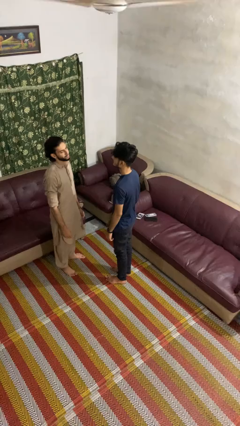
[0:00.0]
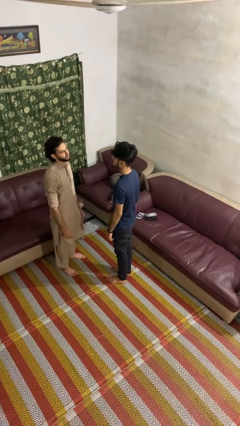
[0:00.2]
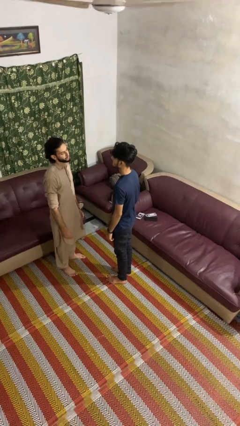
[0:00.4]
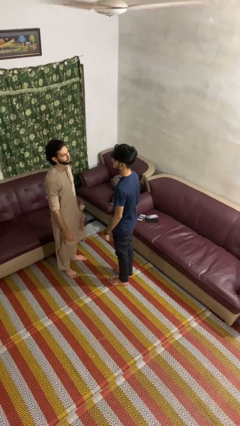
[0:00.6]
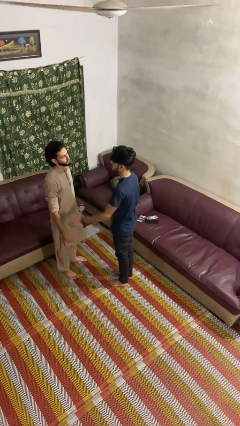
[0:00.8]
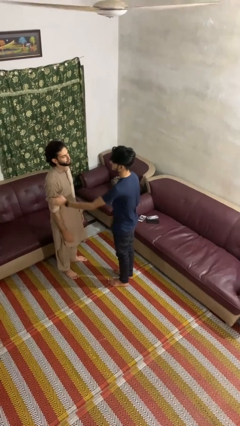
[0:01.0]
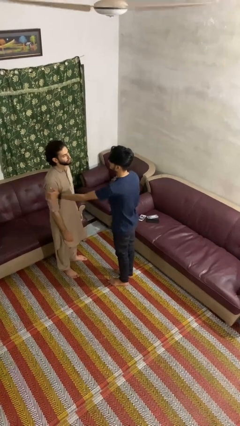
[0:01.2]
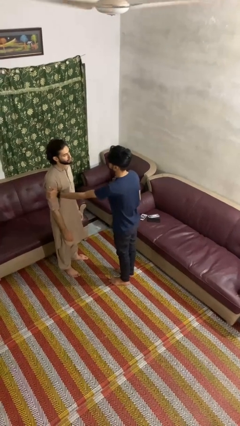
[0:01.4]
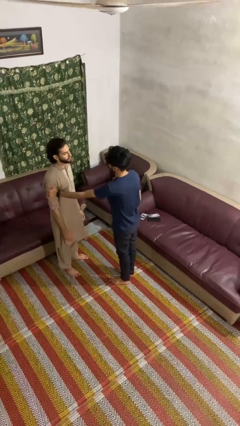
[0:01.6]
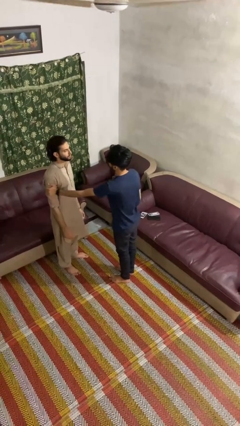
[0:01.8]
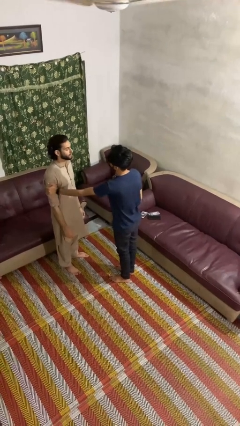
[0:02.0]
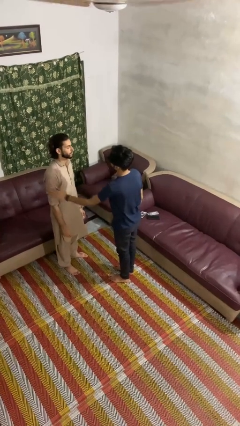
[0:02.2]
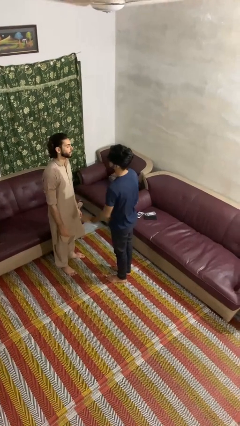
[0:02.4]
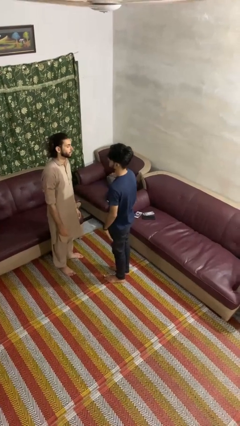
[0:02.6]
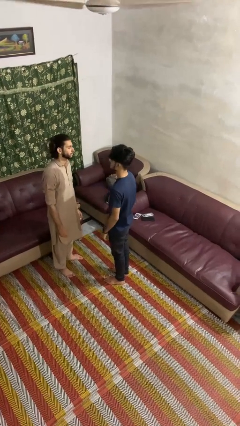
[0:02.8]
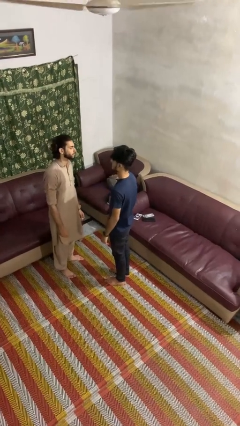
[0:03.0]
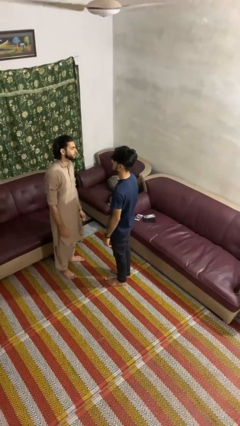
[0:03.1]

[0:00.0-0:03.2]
person grabs person by bicep

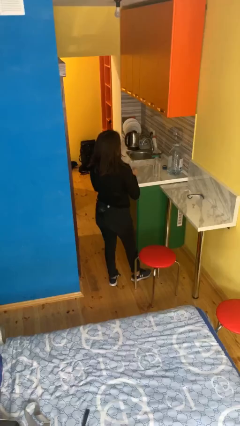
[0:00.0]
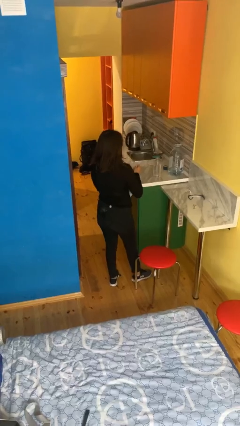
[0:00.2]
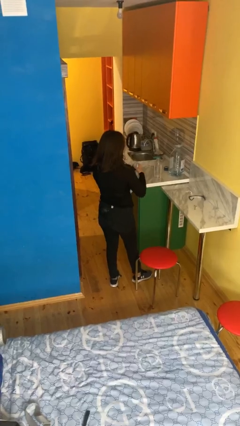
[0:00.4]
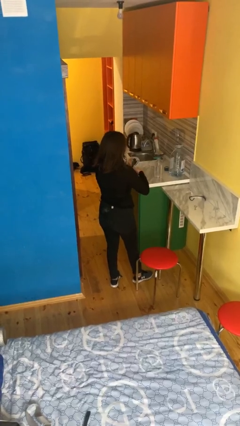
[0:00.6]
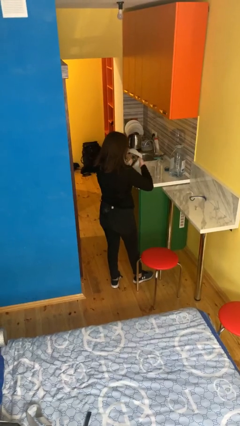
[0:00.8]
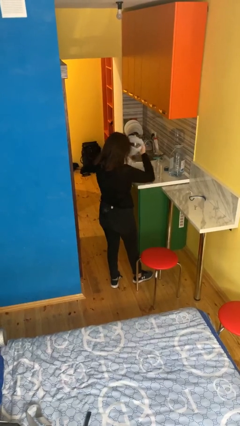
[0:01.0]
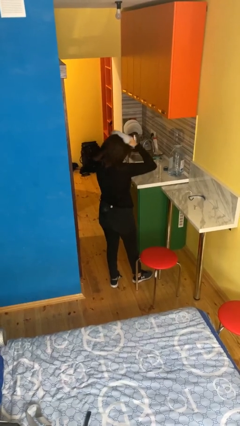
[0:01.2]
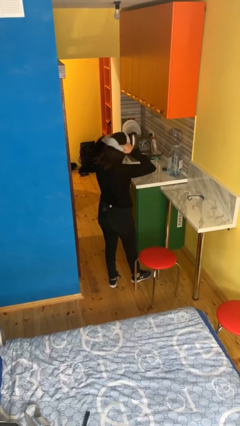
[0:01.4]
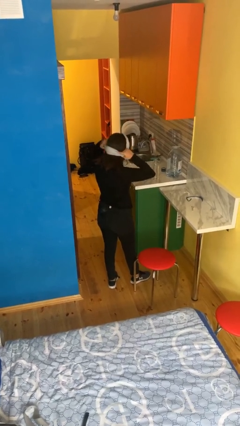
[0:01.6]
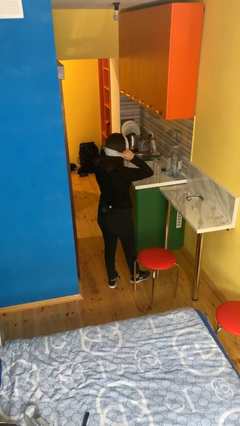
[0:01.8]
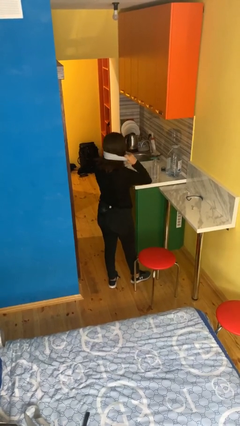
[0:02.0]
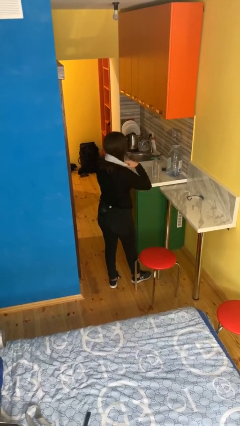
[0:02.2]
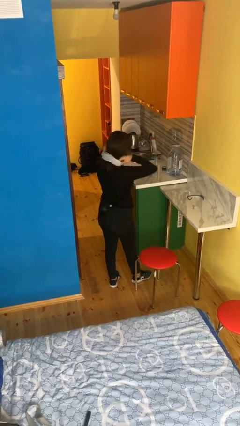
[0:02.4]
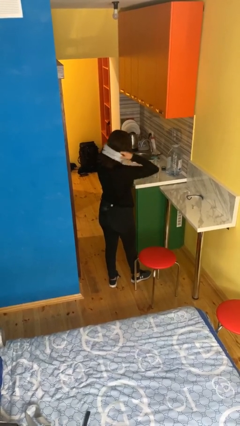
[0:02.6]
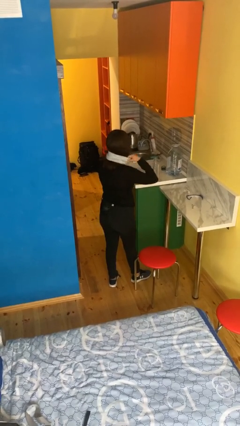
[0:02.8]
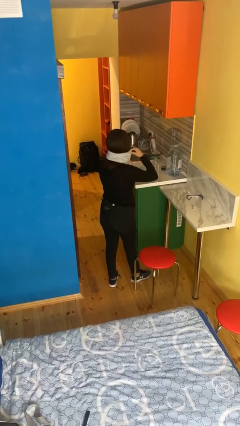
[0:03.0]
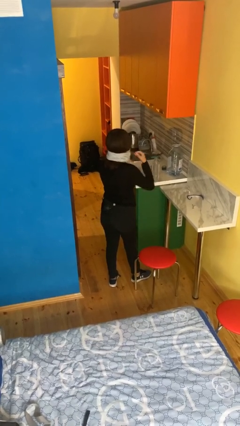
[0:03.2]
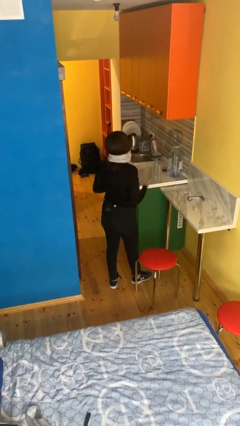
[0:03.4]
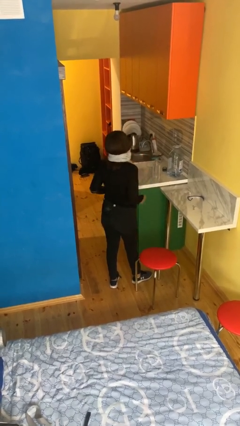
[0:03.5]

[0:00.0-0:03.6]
person puts on scarf

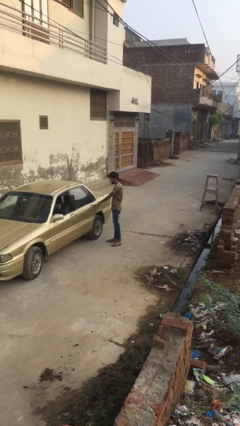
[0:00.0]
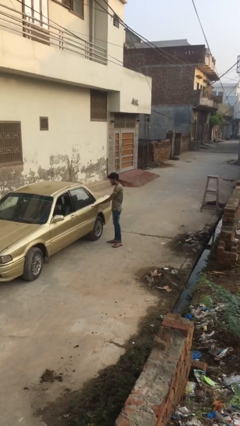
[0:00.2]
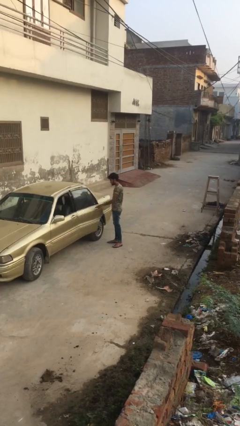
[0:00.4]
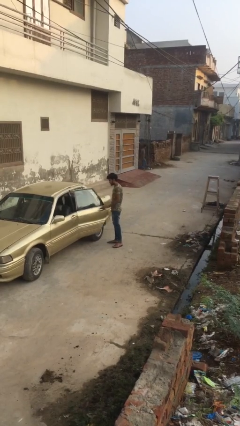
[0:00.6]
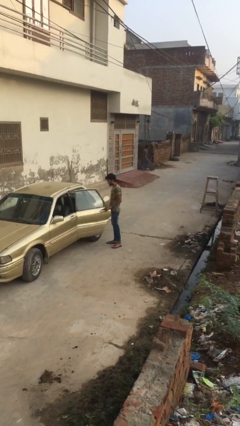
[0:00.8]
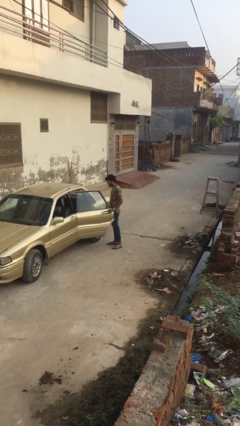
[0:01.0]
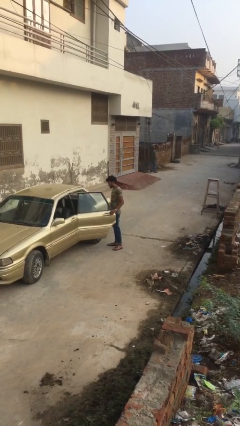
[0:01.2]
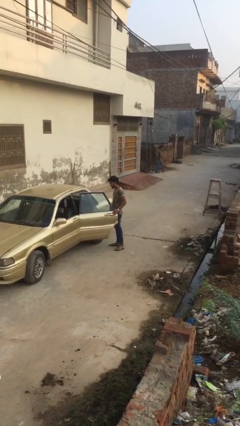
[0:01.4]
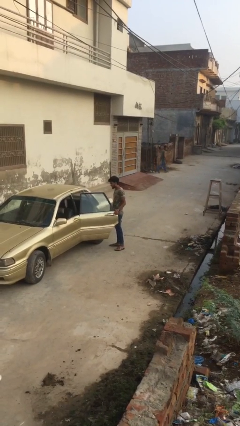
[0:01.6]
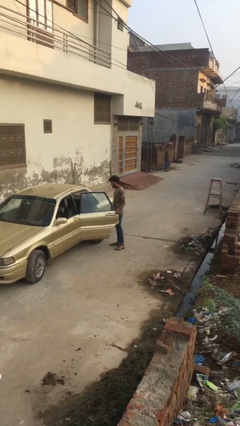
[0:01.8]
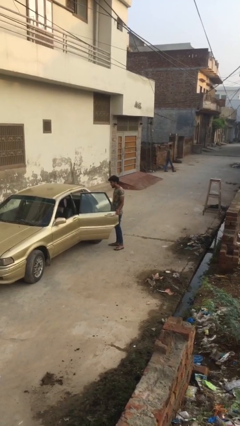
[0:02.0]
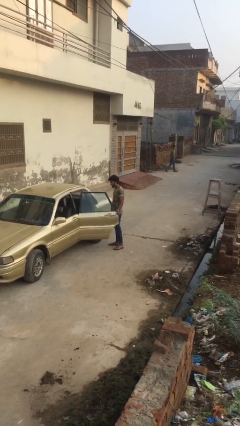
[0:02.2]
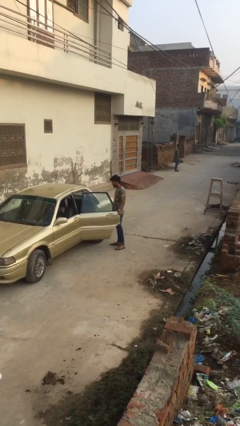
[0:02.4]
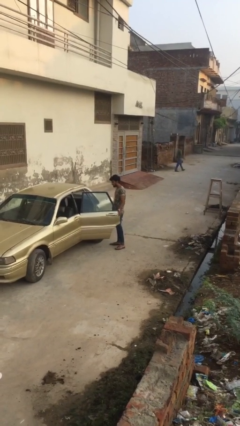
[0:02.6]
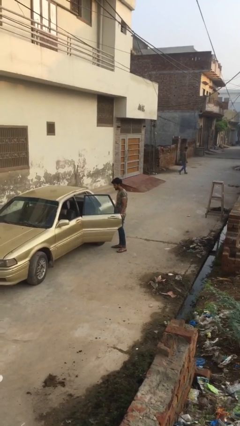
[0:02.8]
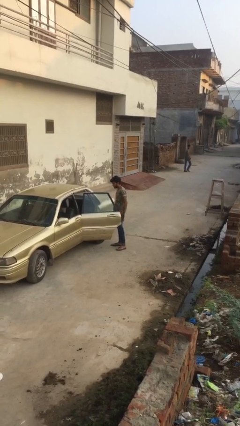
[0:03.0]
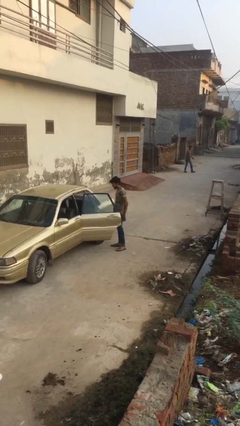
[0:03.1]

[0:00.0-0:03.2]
person opens car door

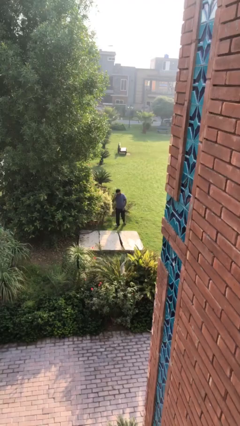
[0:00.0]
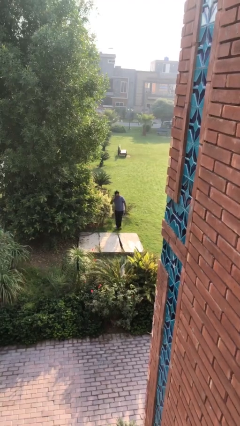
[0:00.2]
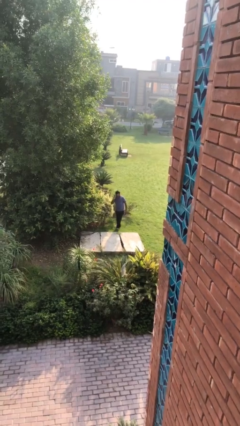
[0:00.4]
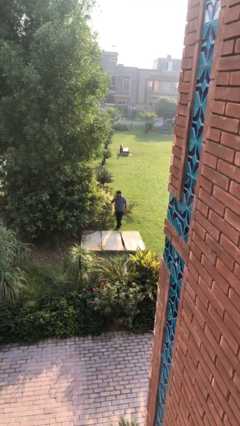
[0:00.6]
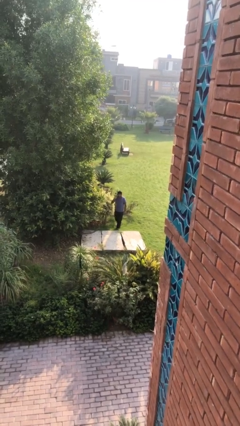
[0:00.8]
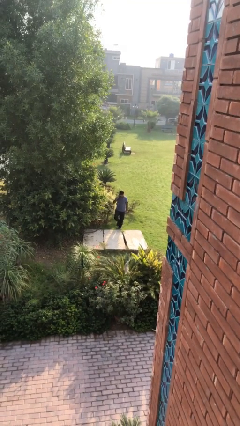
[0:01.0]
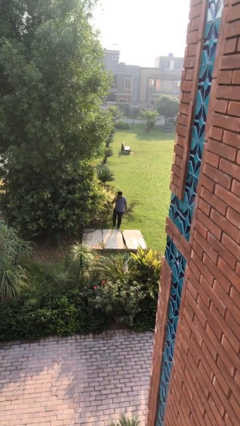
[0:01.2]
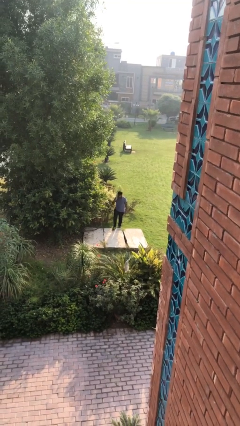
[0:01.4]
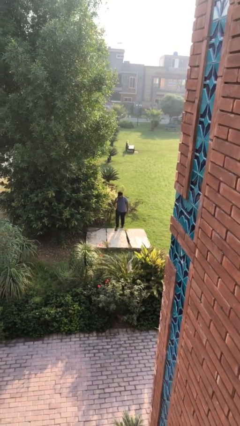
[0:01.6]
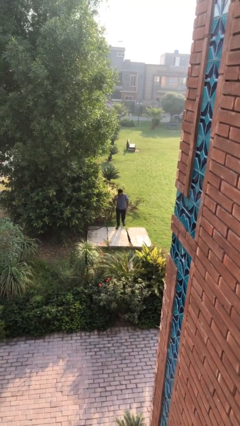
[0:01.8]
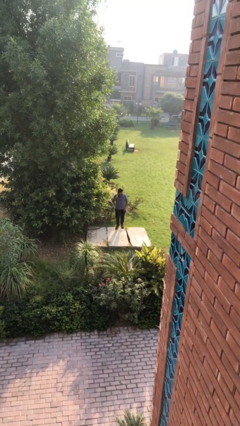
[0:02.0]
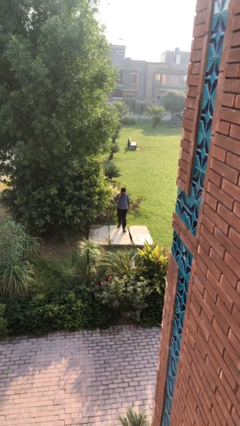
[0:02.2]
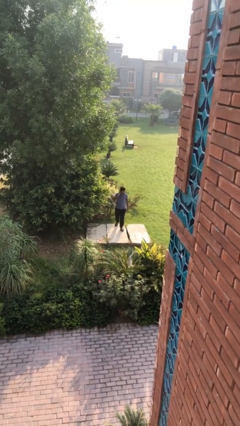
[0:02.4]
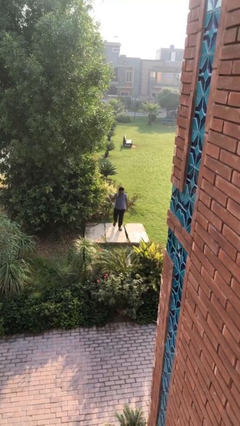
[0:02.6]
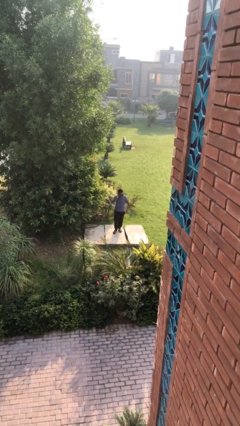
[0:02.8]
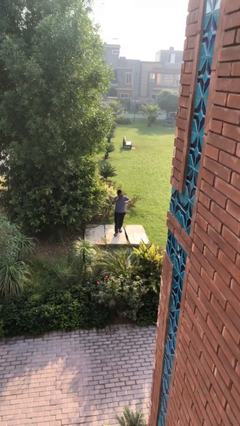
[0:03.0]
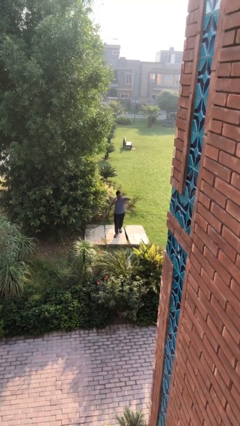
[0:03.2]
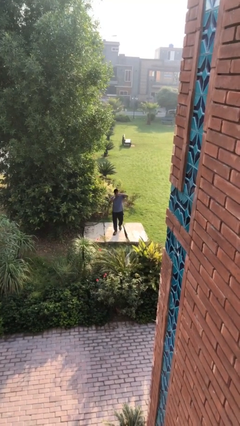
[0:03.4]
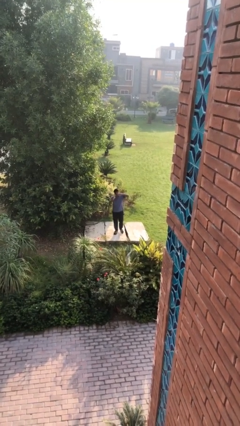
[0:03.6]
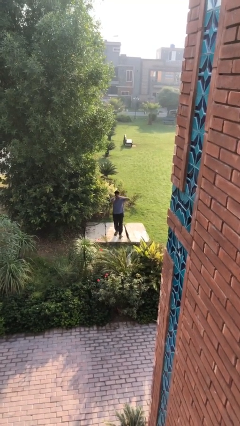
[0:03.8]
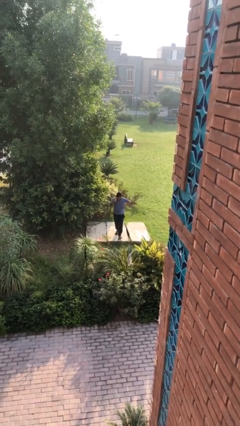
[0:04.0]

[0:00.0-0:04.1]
person talks on phone

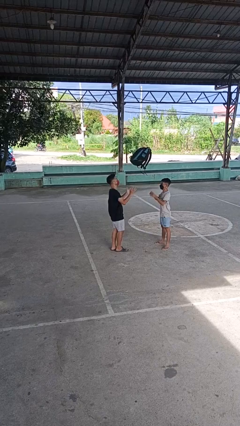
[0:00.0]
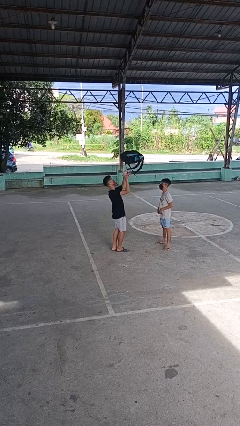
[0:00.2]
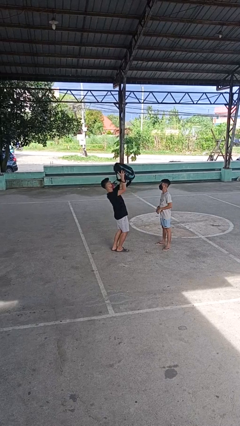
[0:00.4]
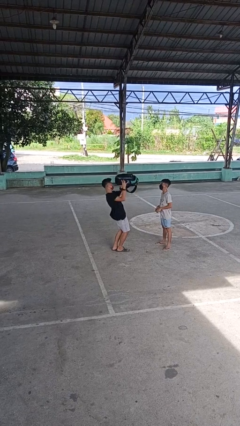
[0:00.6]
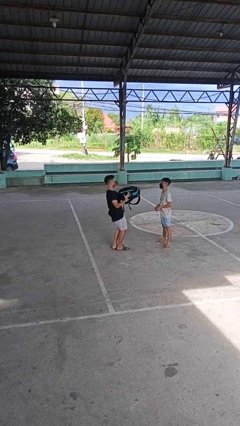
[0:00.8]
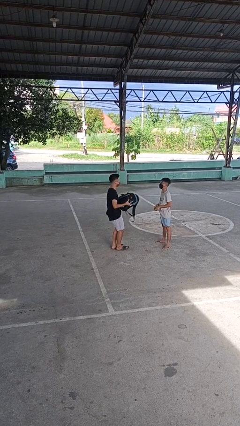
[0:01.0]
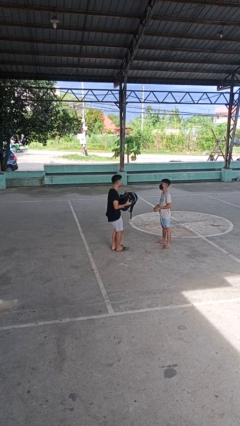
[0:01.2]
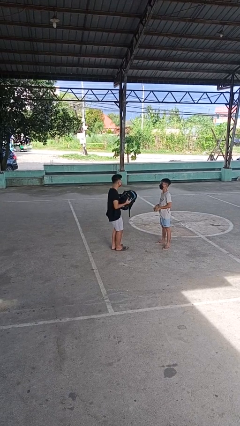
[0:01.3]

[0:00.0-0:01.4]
person catches object from person

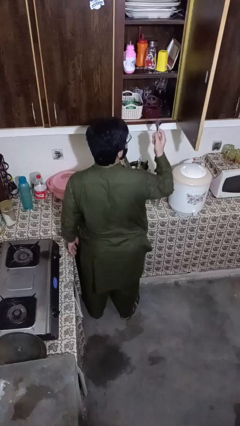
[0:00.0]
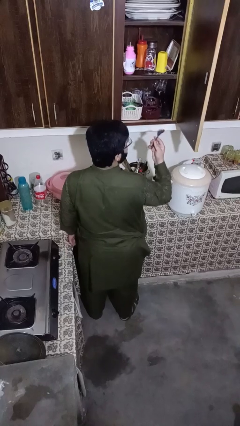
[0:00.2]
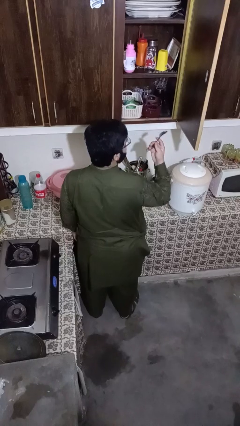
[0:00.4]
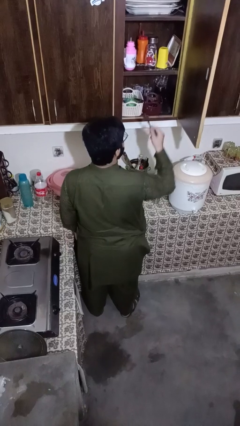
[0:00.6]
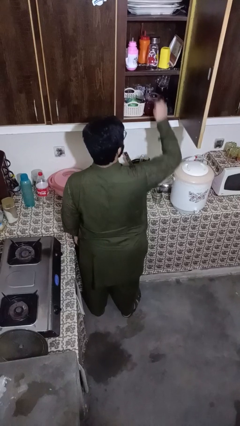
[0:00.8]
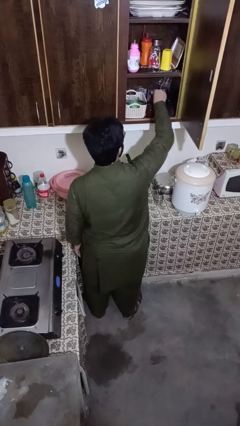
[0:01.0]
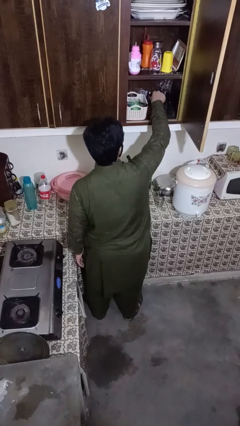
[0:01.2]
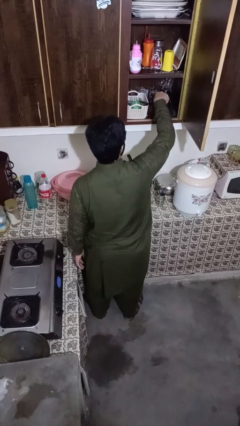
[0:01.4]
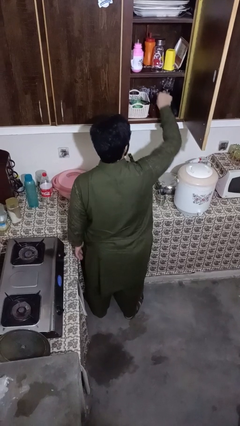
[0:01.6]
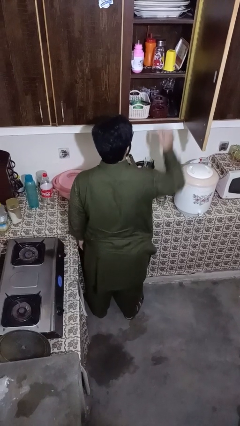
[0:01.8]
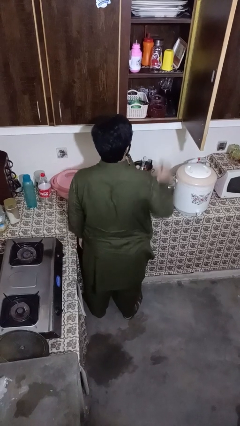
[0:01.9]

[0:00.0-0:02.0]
person puts object into kitchen drawer
